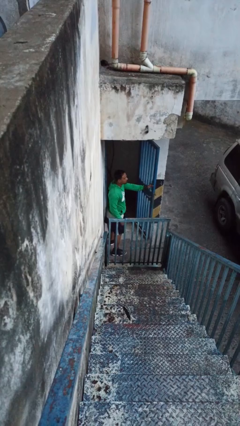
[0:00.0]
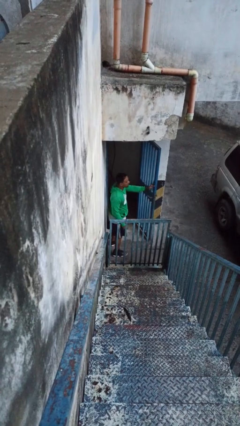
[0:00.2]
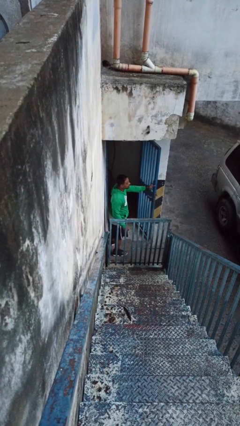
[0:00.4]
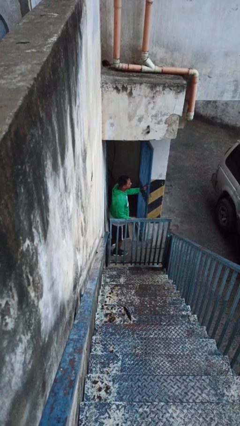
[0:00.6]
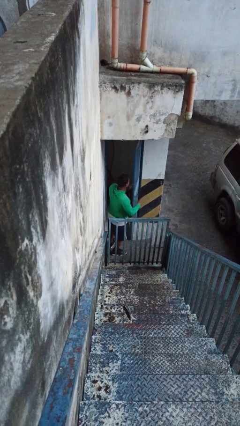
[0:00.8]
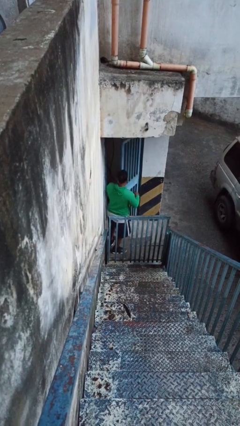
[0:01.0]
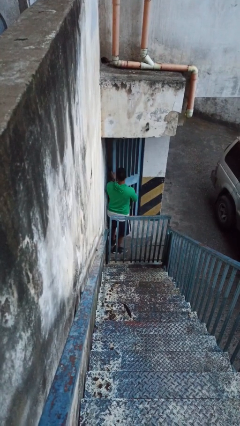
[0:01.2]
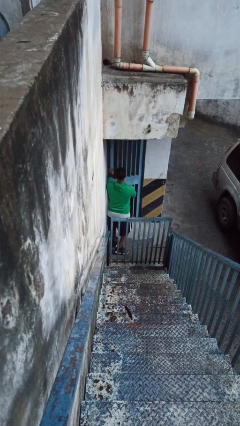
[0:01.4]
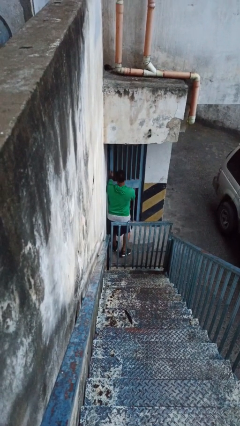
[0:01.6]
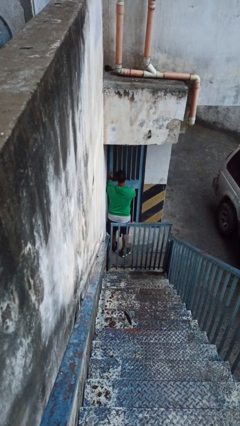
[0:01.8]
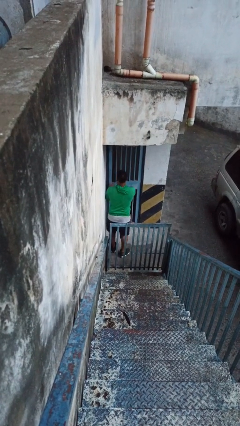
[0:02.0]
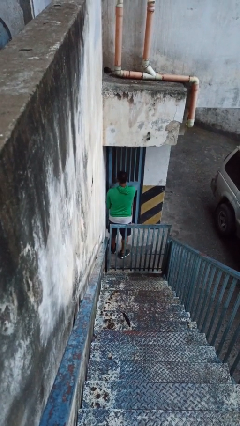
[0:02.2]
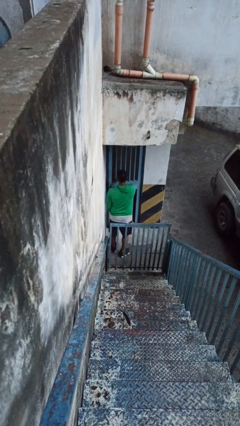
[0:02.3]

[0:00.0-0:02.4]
person closes facility door

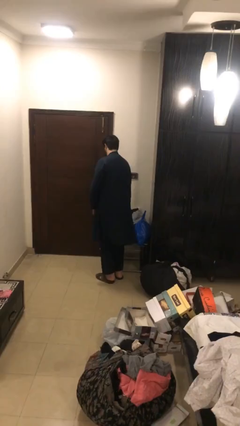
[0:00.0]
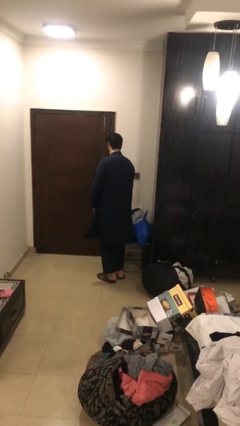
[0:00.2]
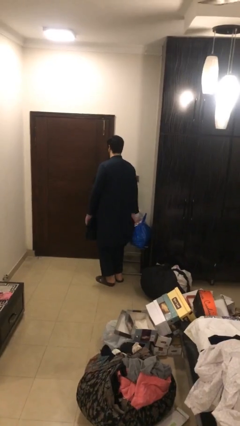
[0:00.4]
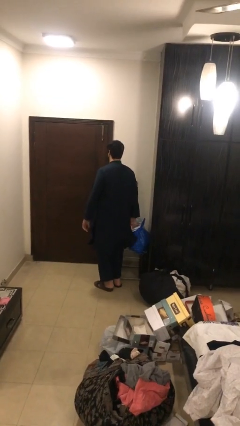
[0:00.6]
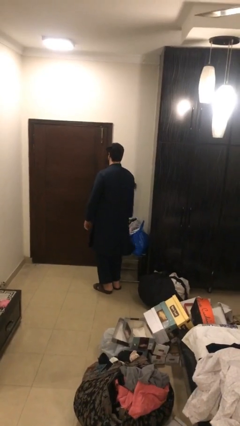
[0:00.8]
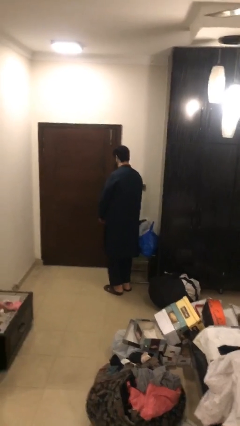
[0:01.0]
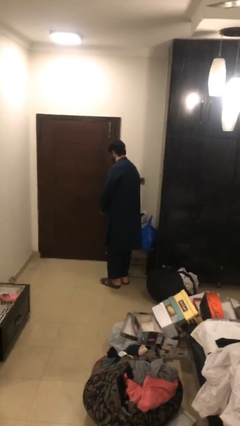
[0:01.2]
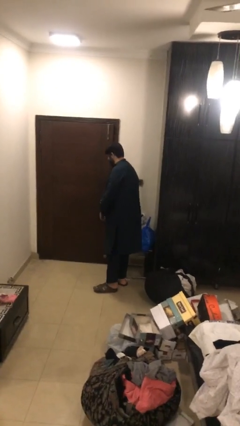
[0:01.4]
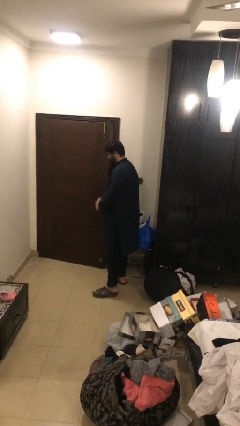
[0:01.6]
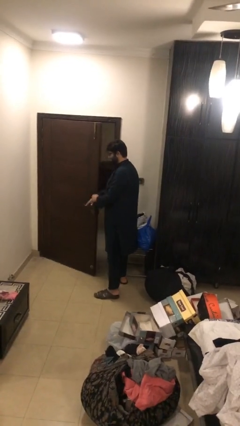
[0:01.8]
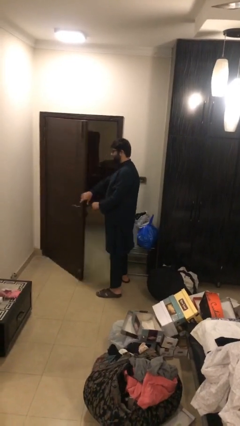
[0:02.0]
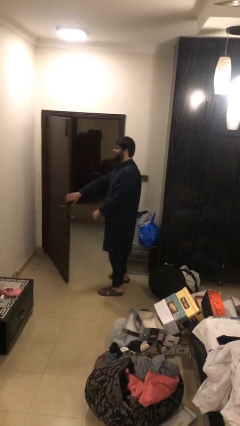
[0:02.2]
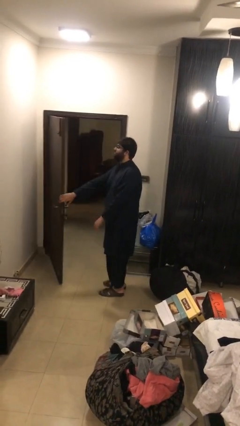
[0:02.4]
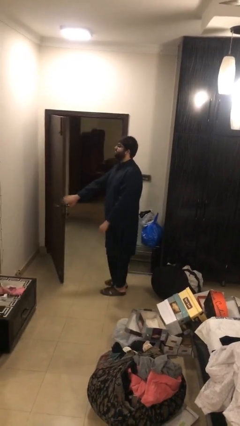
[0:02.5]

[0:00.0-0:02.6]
person opens facility door

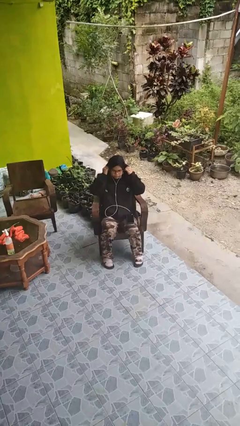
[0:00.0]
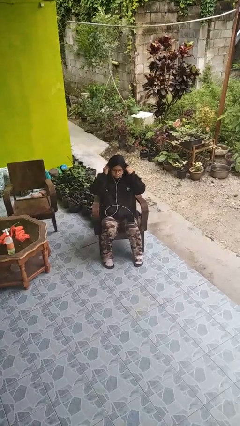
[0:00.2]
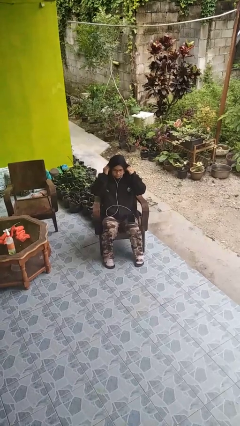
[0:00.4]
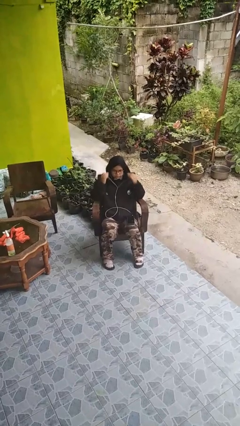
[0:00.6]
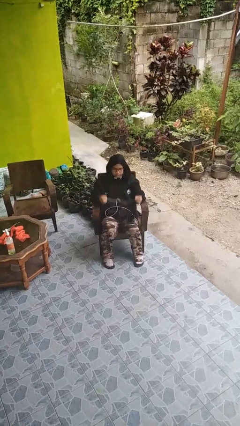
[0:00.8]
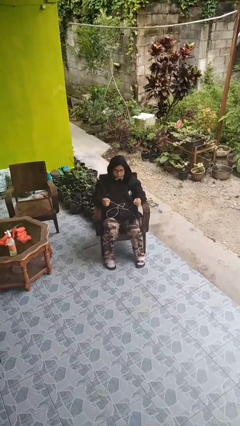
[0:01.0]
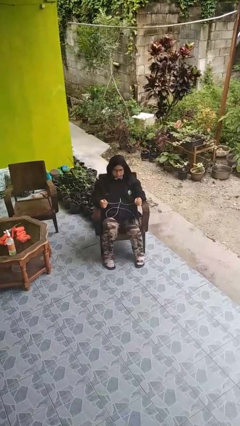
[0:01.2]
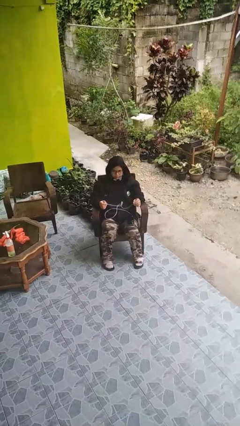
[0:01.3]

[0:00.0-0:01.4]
person takes off headphones

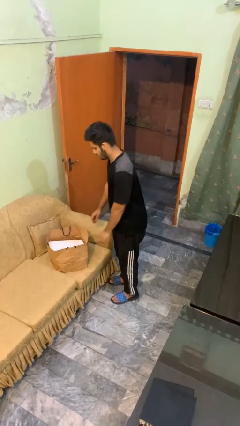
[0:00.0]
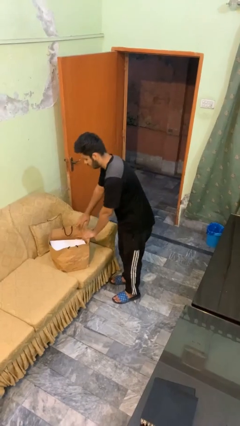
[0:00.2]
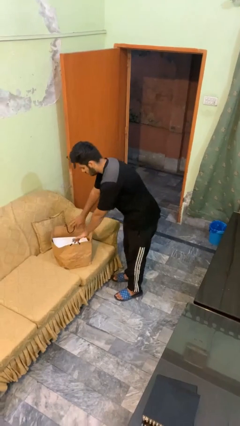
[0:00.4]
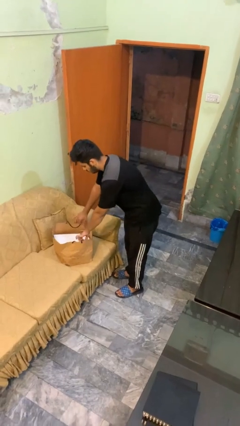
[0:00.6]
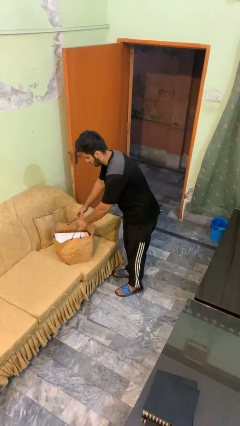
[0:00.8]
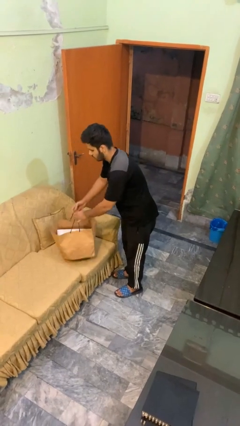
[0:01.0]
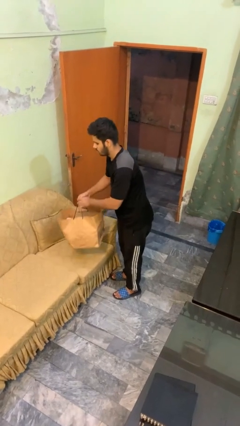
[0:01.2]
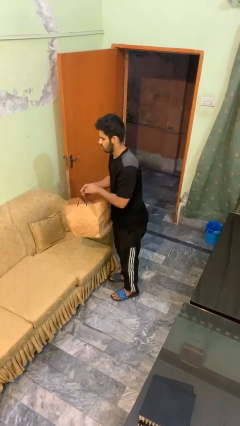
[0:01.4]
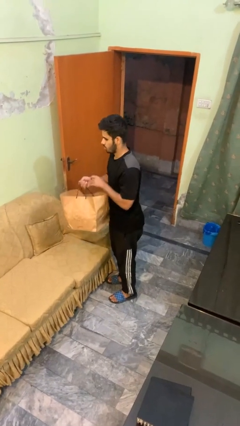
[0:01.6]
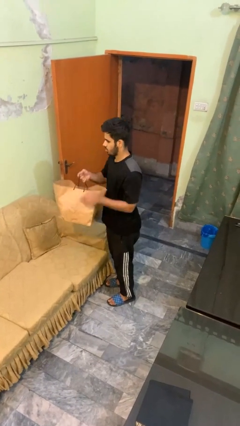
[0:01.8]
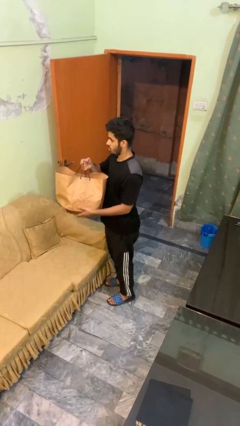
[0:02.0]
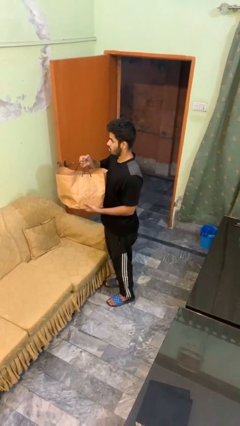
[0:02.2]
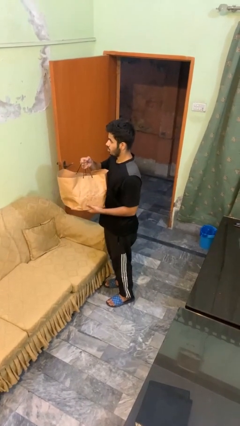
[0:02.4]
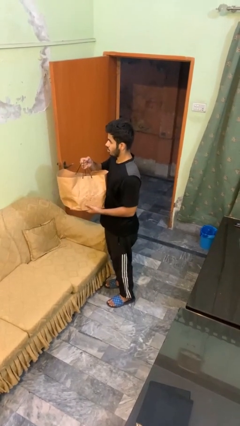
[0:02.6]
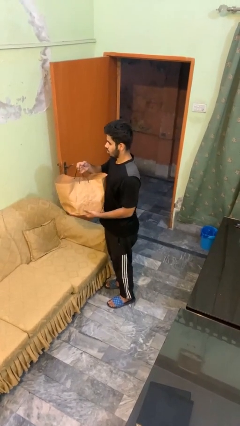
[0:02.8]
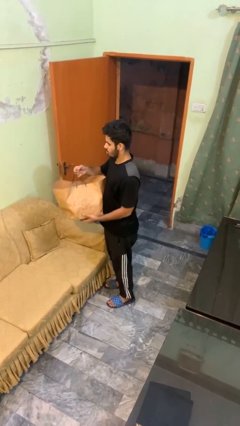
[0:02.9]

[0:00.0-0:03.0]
person picks up object from couch

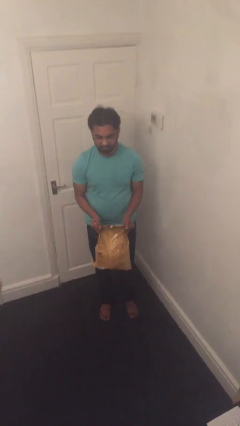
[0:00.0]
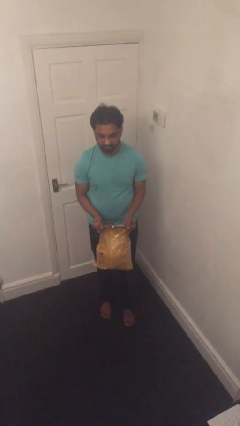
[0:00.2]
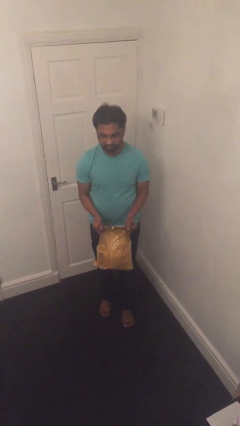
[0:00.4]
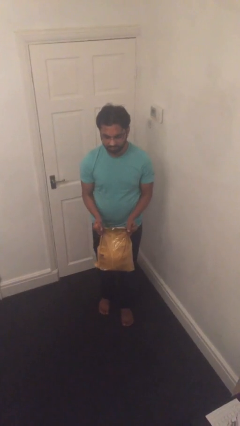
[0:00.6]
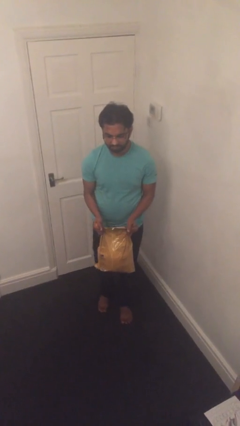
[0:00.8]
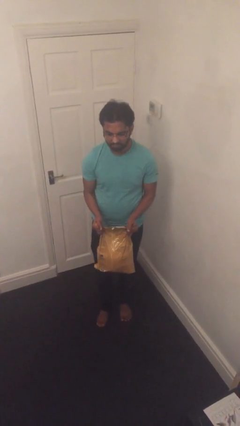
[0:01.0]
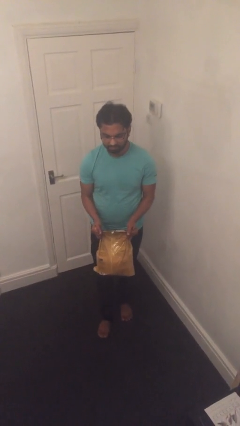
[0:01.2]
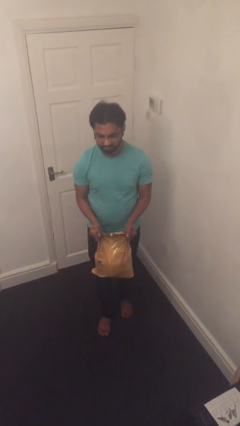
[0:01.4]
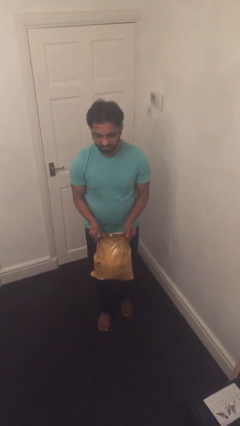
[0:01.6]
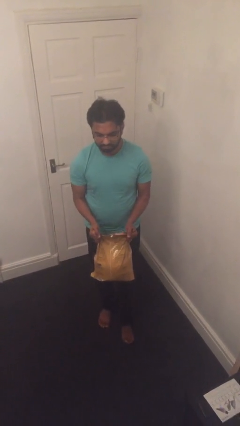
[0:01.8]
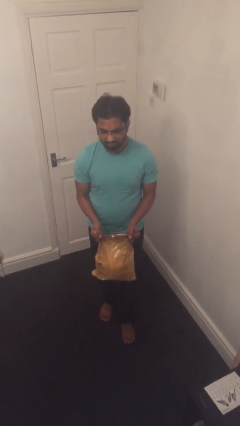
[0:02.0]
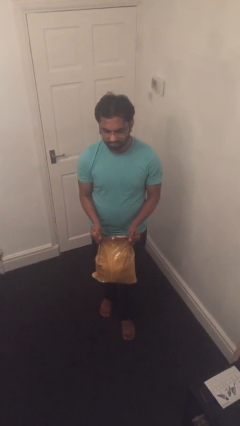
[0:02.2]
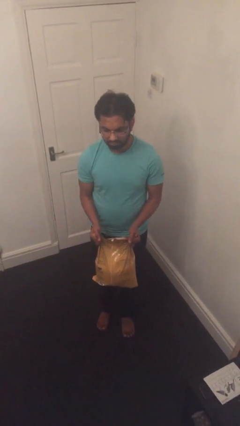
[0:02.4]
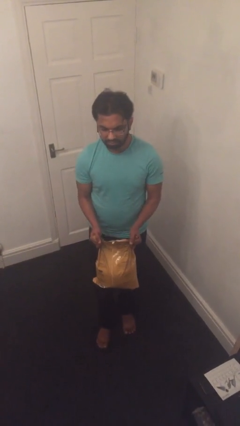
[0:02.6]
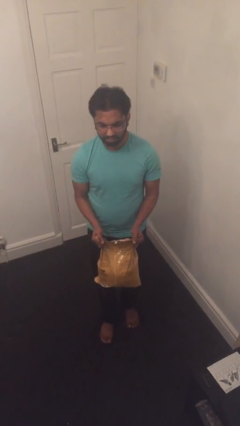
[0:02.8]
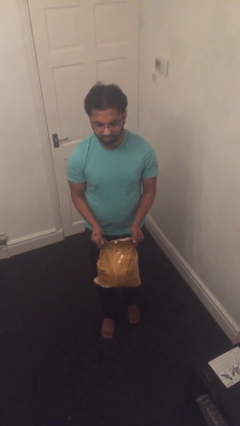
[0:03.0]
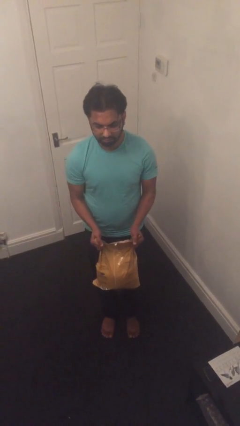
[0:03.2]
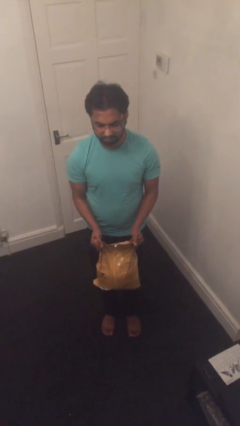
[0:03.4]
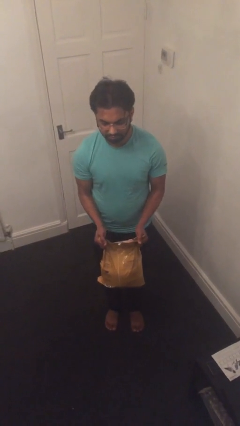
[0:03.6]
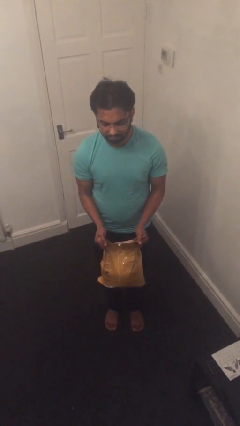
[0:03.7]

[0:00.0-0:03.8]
person carries heavy object

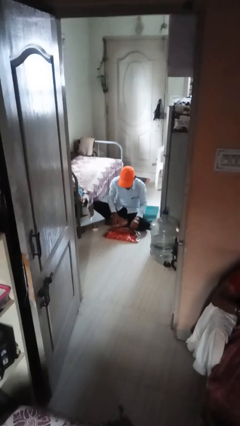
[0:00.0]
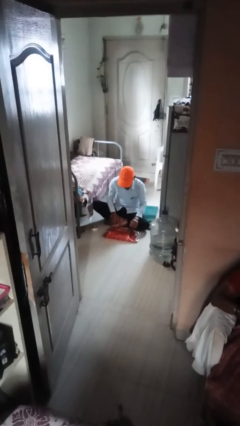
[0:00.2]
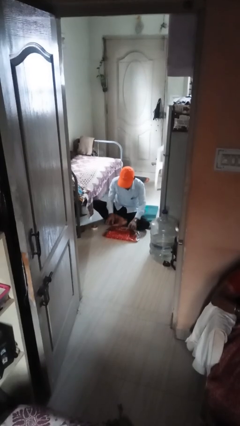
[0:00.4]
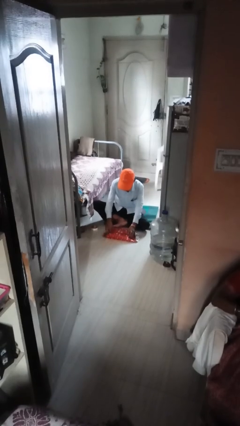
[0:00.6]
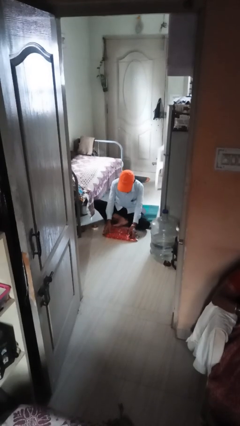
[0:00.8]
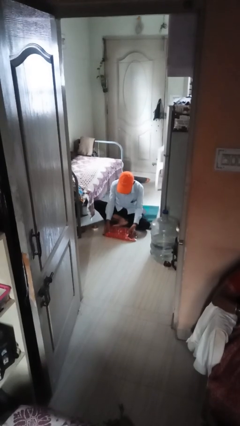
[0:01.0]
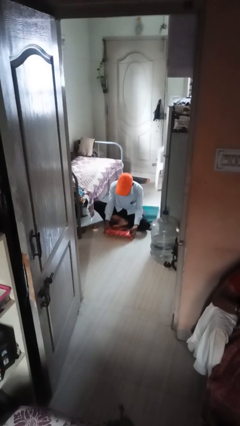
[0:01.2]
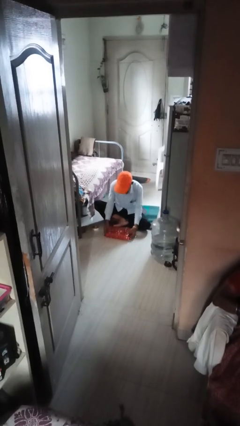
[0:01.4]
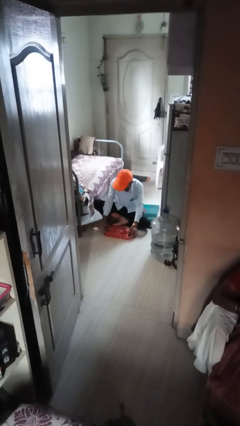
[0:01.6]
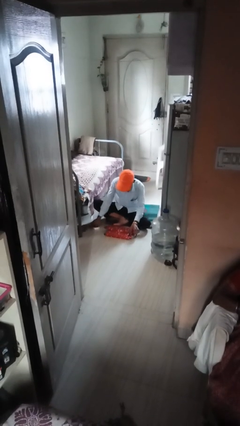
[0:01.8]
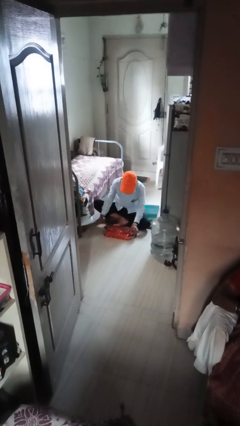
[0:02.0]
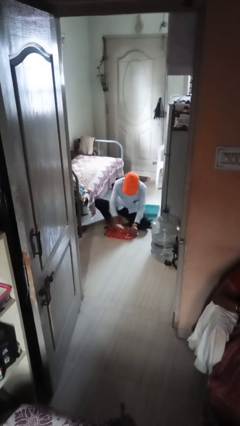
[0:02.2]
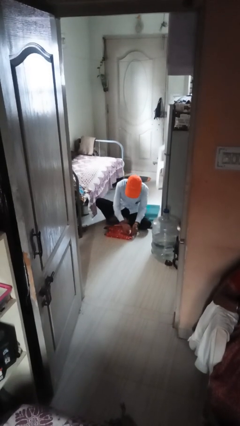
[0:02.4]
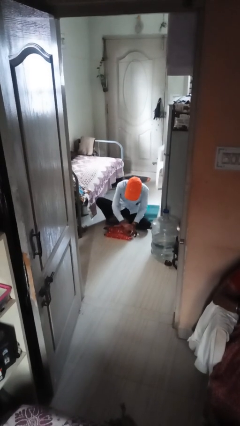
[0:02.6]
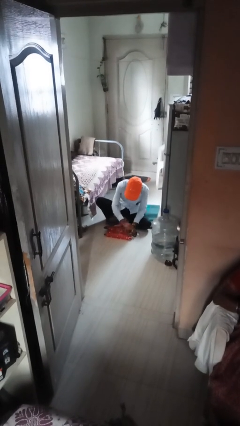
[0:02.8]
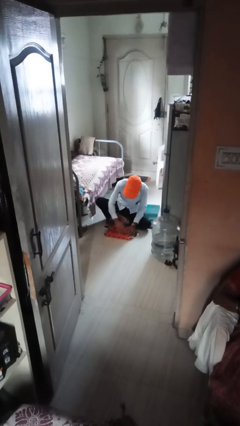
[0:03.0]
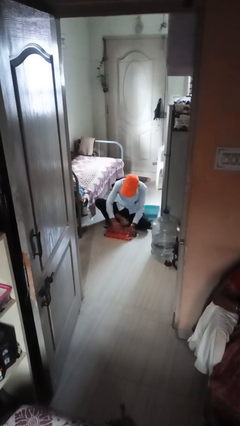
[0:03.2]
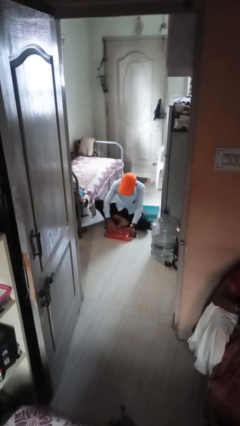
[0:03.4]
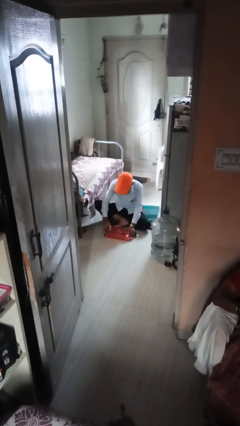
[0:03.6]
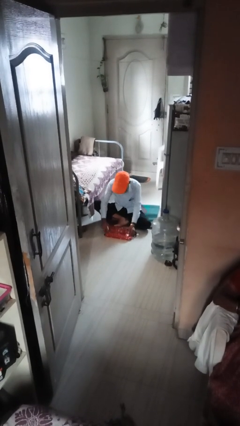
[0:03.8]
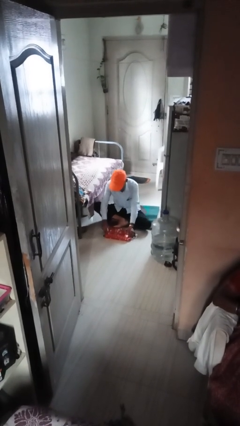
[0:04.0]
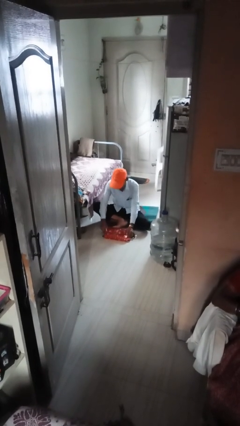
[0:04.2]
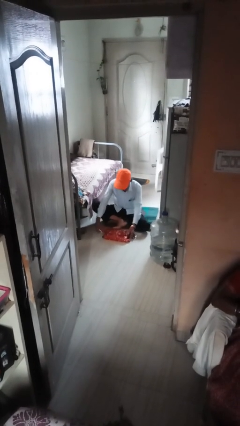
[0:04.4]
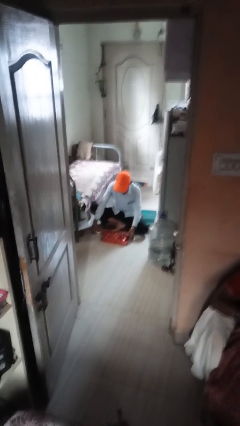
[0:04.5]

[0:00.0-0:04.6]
person wraps box
